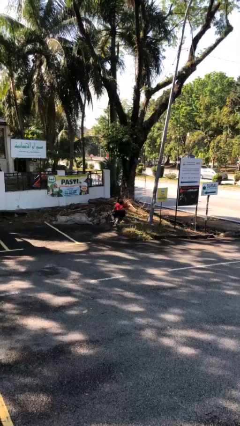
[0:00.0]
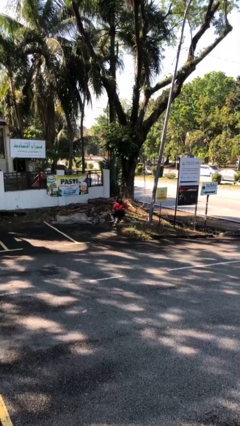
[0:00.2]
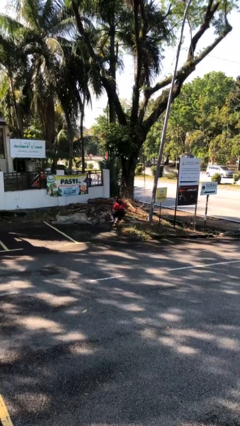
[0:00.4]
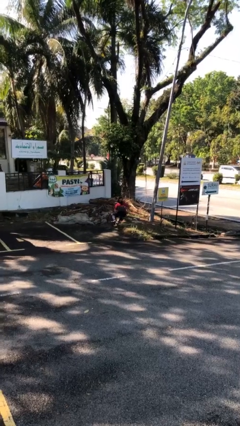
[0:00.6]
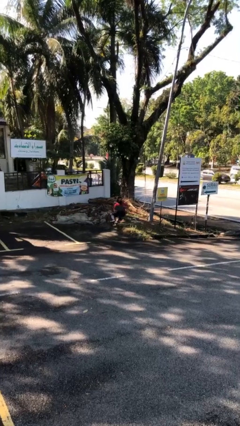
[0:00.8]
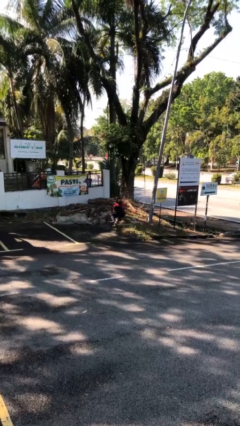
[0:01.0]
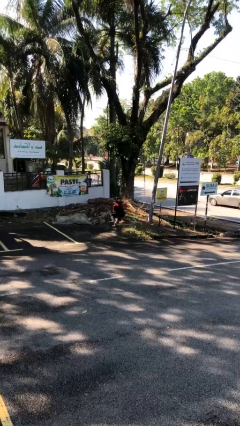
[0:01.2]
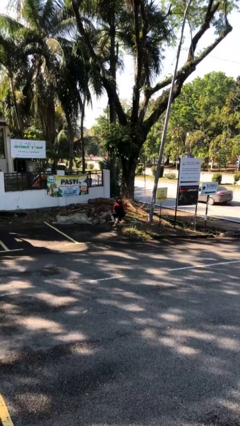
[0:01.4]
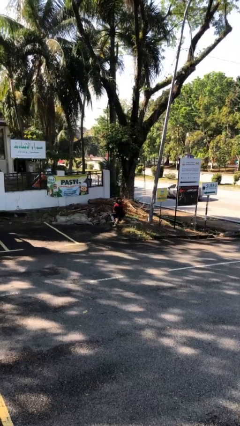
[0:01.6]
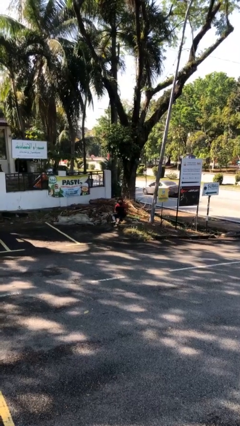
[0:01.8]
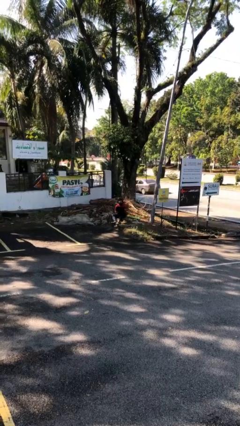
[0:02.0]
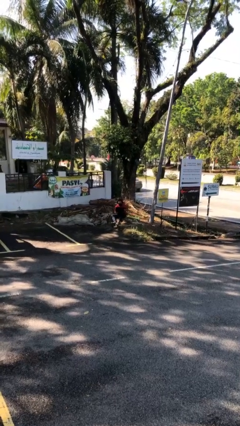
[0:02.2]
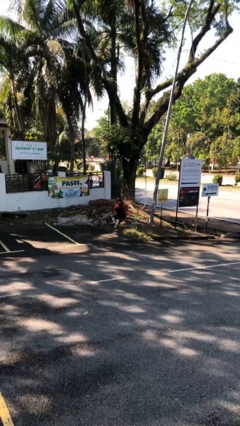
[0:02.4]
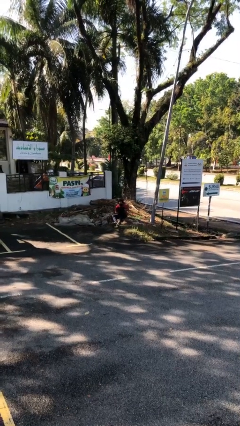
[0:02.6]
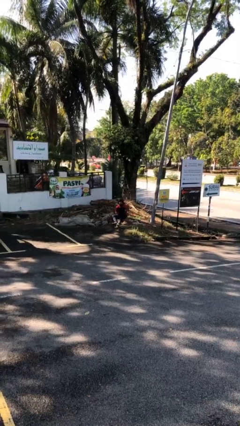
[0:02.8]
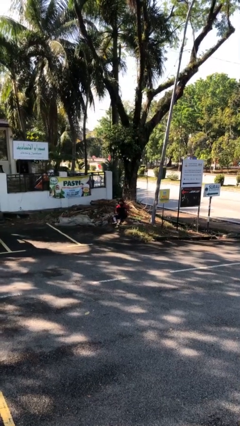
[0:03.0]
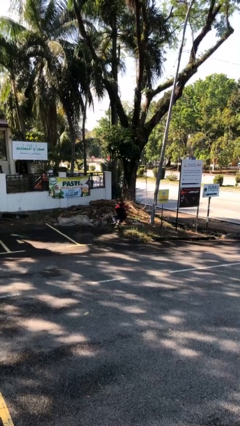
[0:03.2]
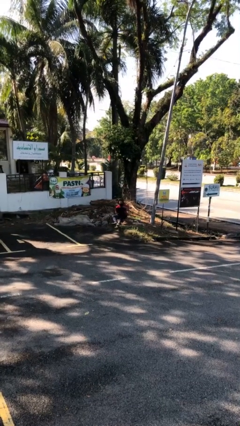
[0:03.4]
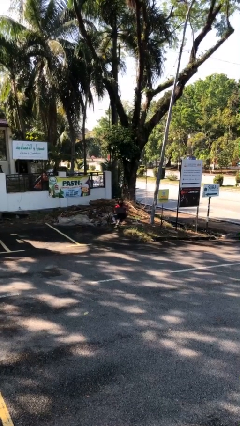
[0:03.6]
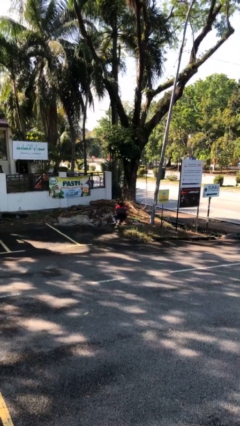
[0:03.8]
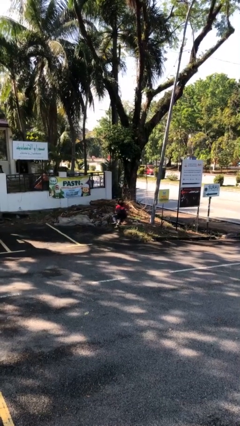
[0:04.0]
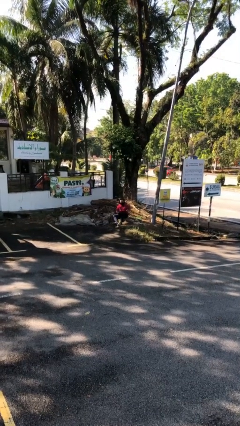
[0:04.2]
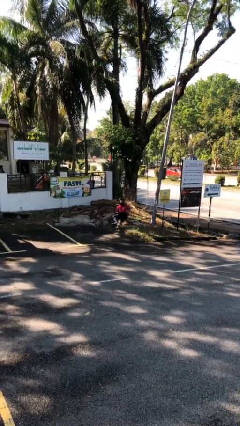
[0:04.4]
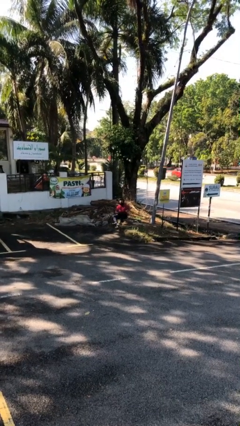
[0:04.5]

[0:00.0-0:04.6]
person interacts with laptop

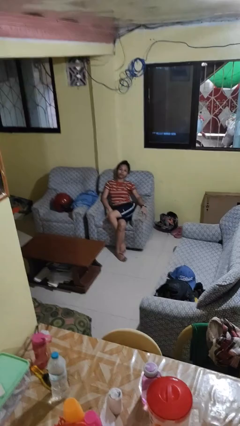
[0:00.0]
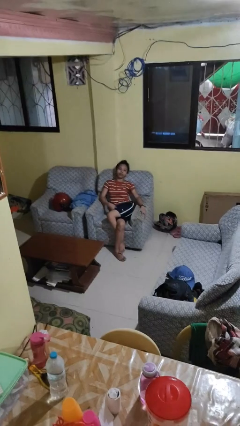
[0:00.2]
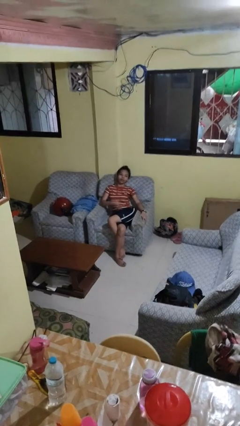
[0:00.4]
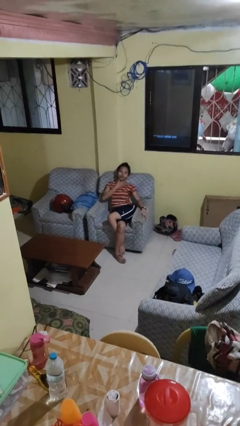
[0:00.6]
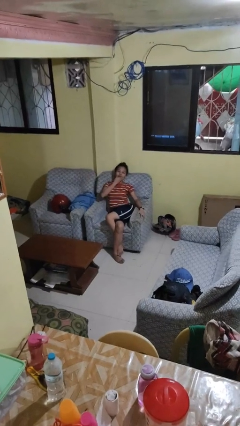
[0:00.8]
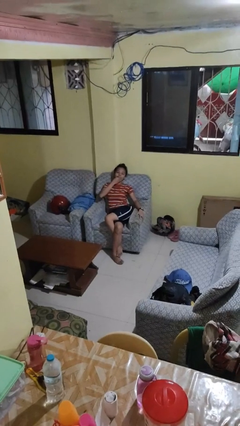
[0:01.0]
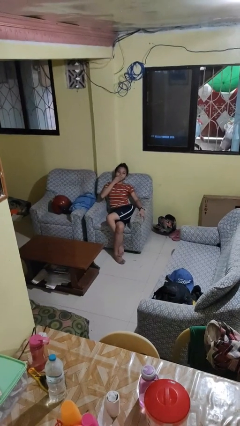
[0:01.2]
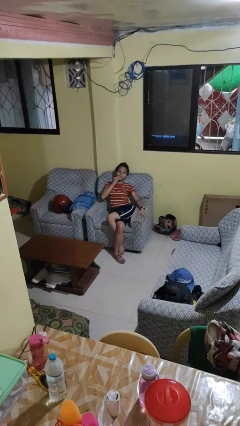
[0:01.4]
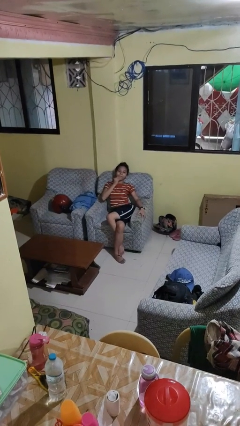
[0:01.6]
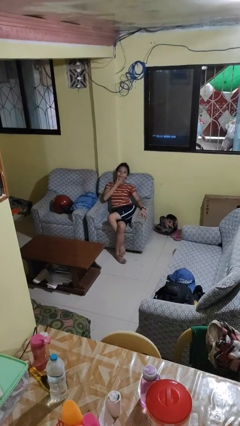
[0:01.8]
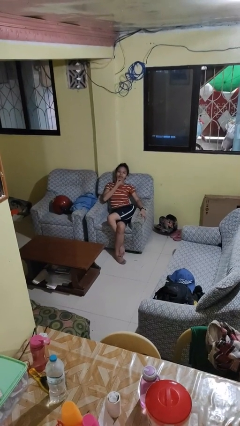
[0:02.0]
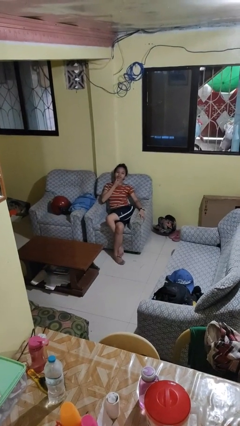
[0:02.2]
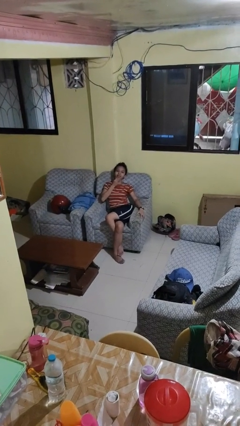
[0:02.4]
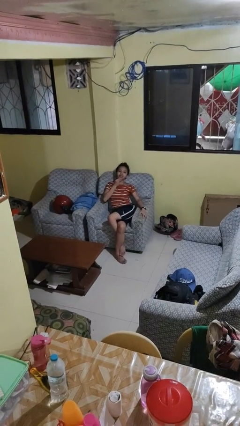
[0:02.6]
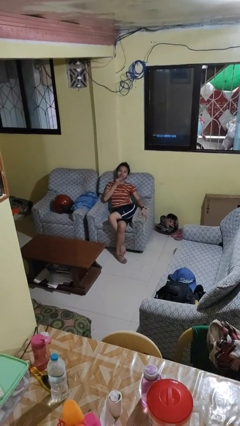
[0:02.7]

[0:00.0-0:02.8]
person strokes chin

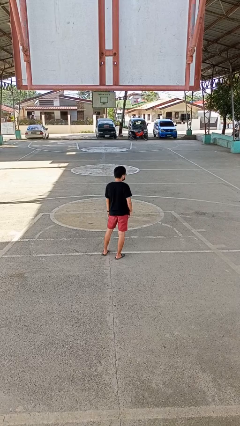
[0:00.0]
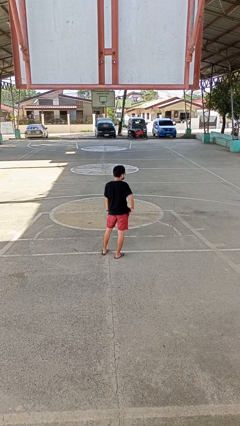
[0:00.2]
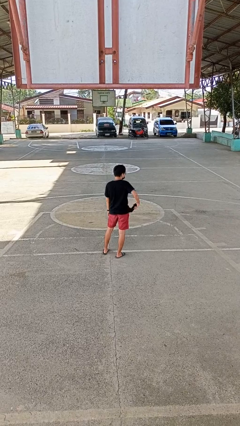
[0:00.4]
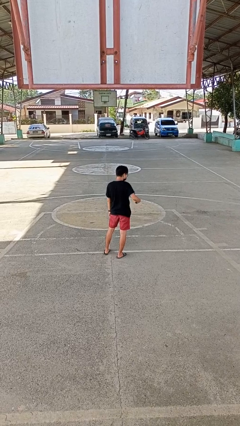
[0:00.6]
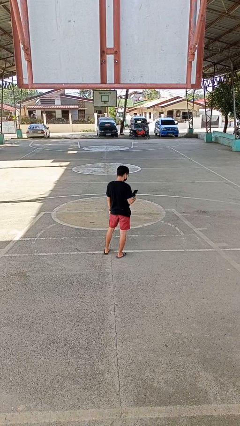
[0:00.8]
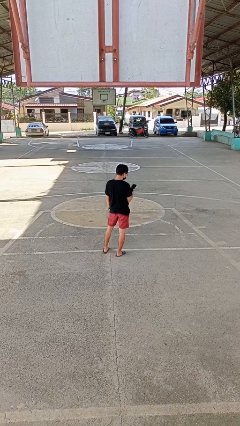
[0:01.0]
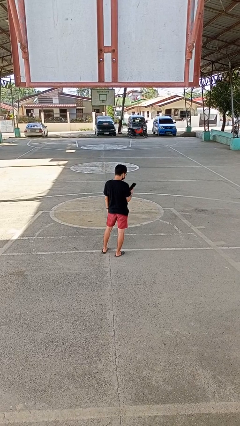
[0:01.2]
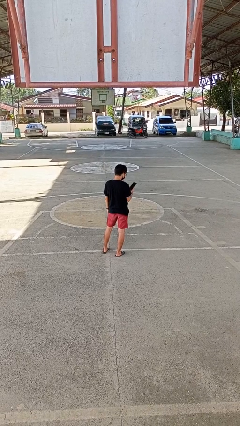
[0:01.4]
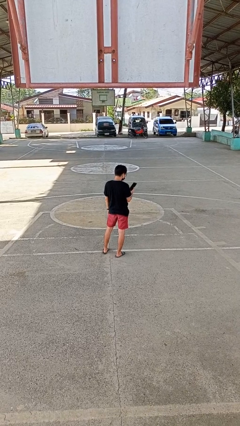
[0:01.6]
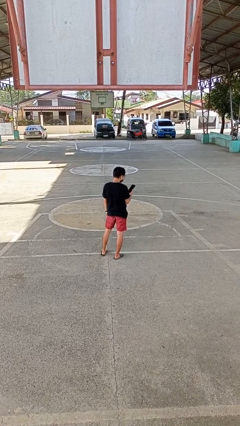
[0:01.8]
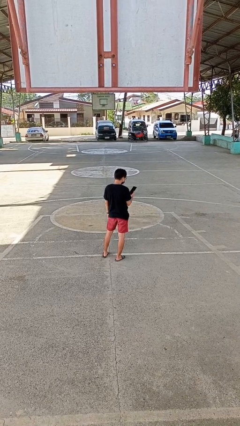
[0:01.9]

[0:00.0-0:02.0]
person takes phone from pocket

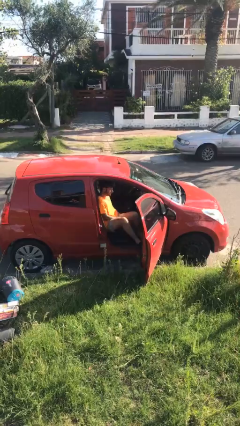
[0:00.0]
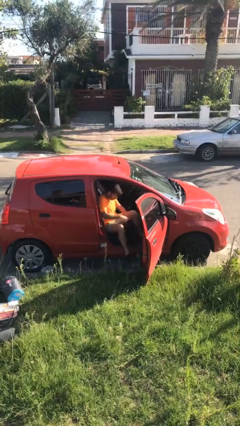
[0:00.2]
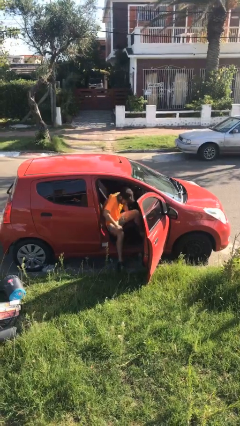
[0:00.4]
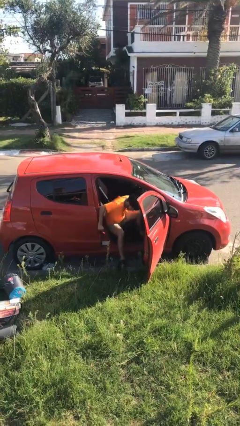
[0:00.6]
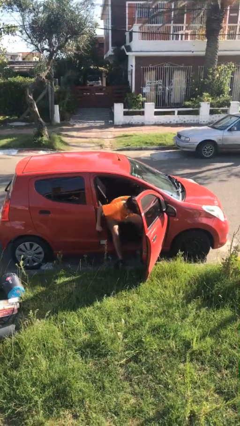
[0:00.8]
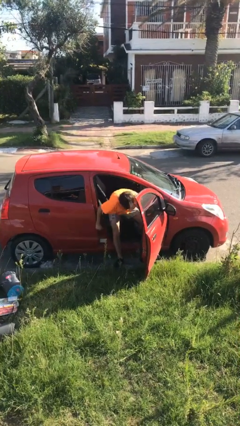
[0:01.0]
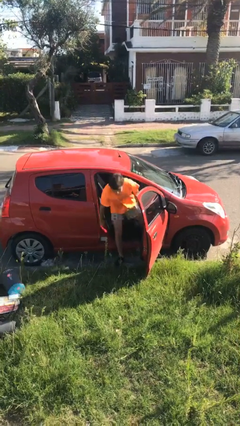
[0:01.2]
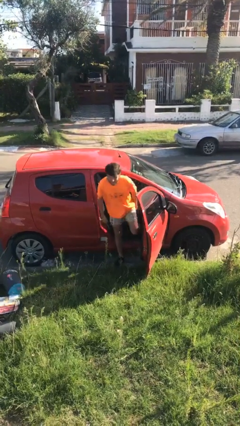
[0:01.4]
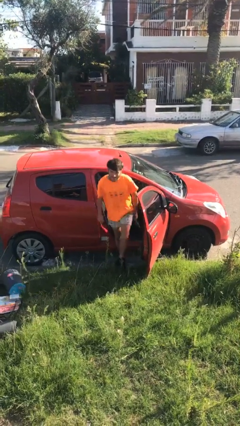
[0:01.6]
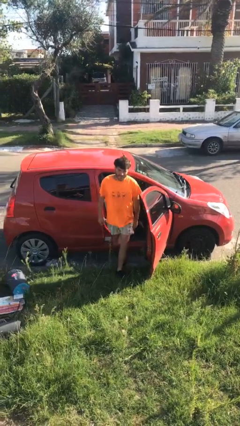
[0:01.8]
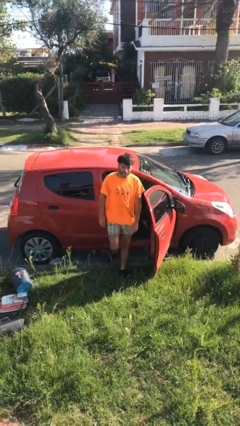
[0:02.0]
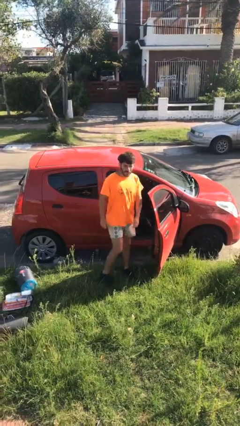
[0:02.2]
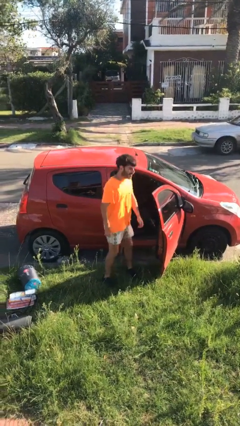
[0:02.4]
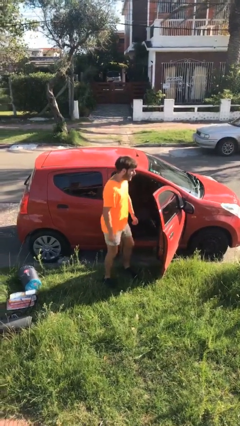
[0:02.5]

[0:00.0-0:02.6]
person exits car

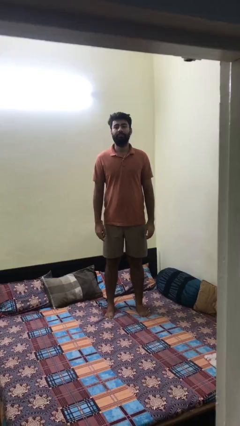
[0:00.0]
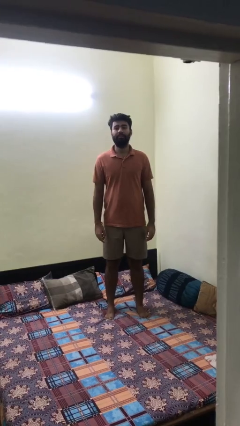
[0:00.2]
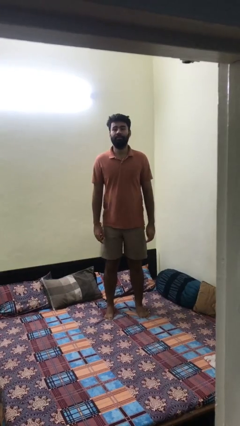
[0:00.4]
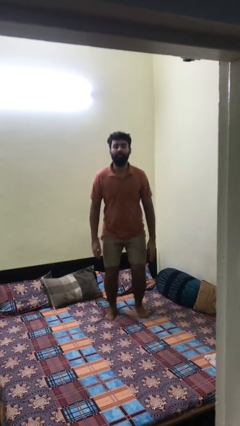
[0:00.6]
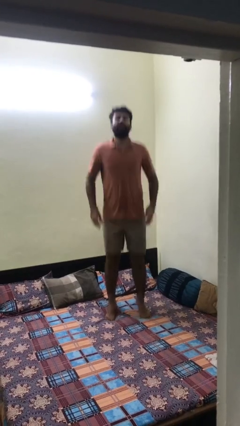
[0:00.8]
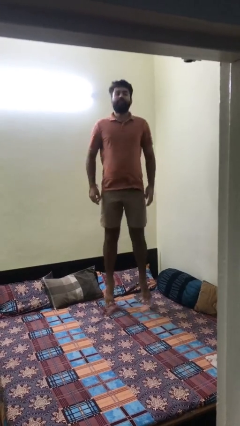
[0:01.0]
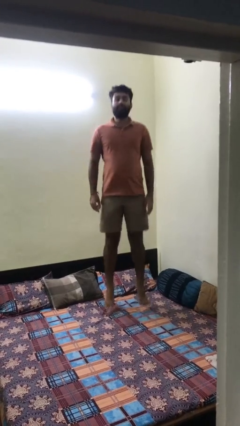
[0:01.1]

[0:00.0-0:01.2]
person jumps on bed

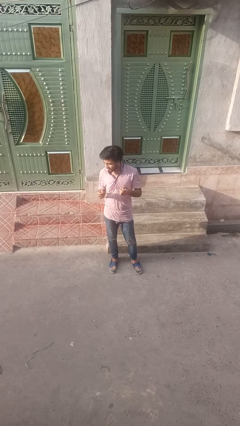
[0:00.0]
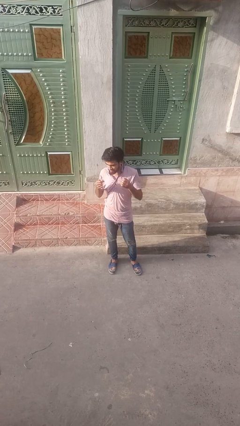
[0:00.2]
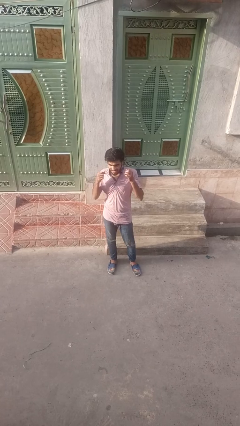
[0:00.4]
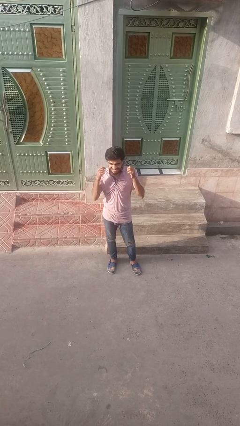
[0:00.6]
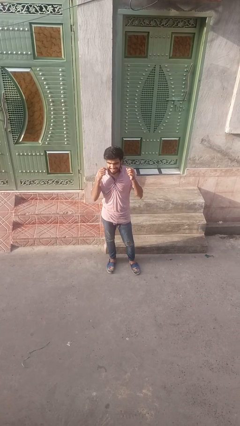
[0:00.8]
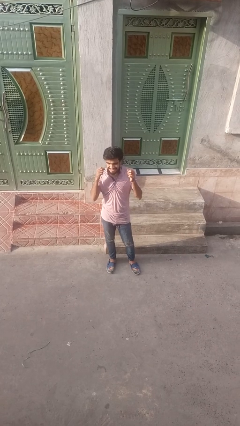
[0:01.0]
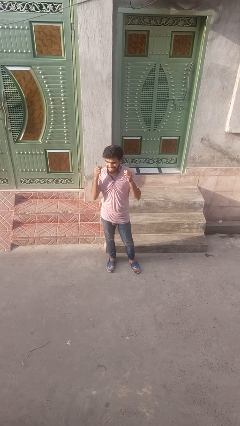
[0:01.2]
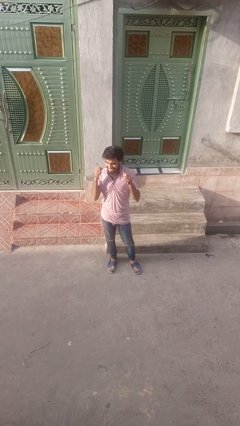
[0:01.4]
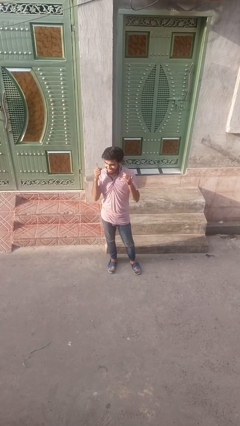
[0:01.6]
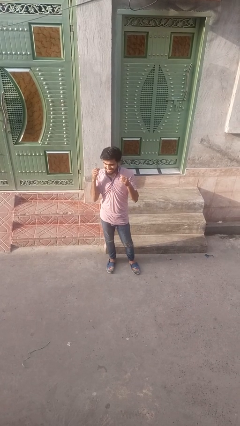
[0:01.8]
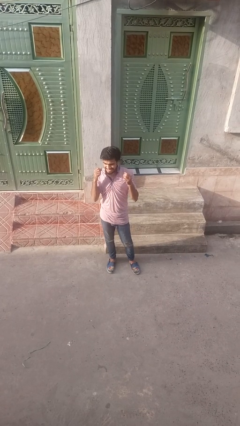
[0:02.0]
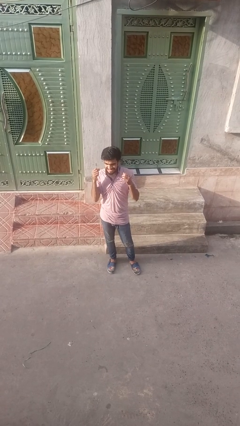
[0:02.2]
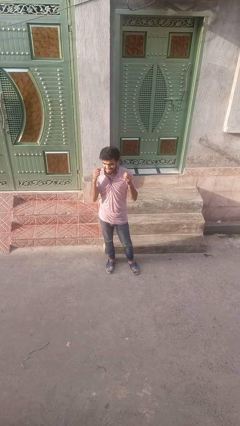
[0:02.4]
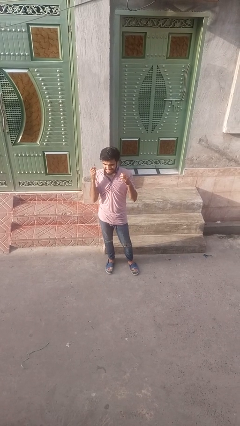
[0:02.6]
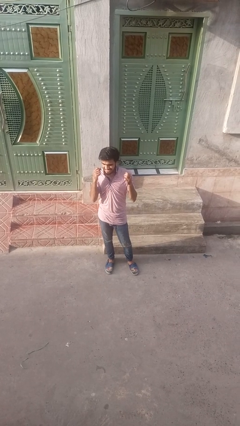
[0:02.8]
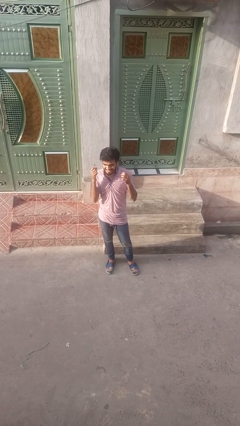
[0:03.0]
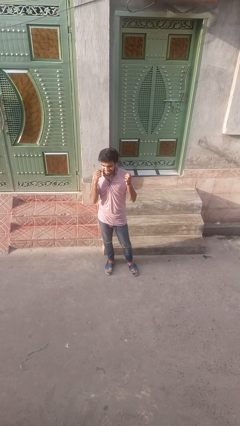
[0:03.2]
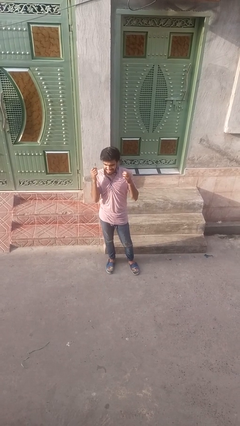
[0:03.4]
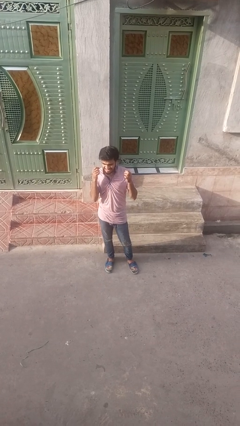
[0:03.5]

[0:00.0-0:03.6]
person flosses

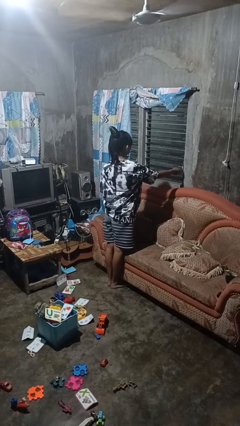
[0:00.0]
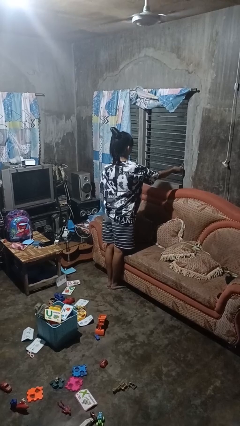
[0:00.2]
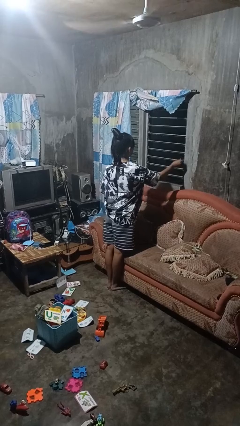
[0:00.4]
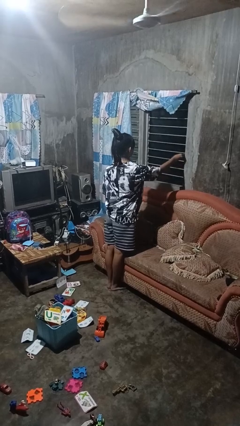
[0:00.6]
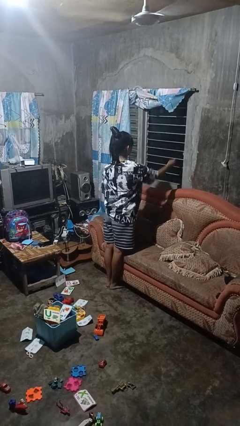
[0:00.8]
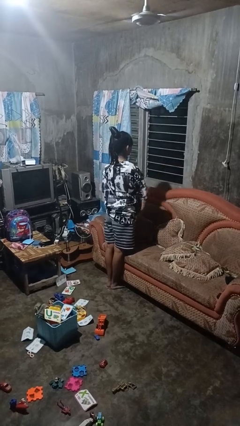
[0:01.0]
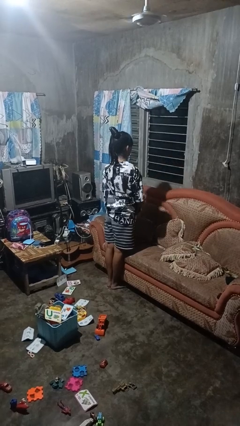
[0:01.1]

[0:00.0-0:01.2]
person closes home window
